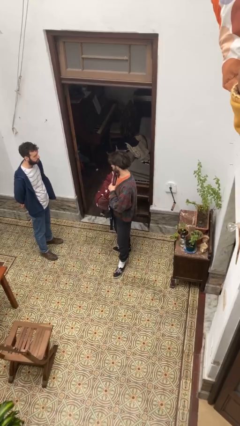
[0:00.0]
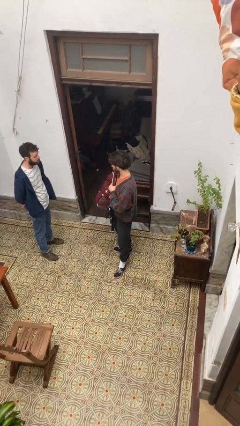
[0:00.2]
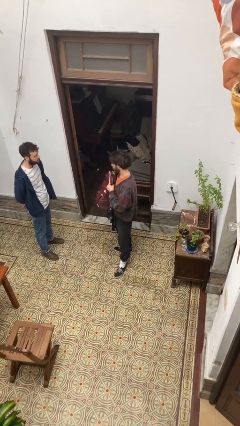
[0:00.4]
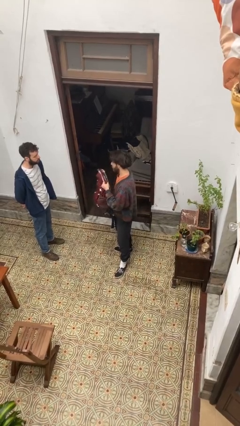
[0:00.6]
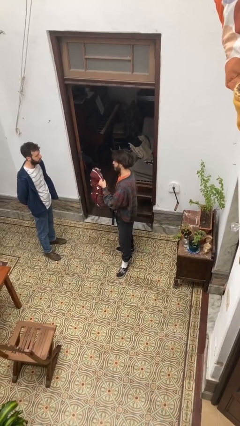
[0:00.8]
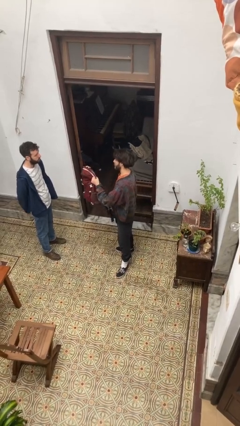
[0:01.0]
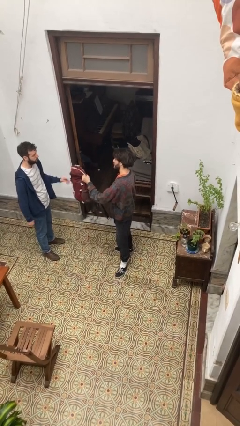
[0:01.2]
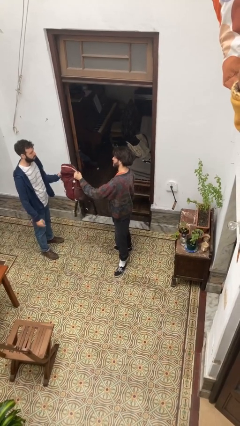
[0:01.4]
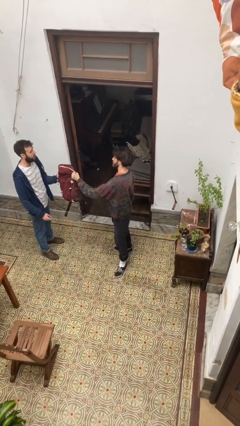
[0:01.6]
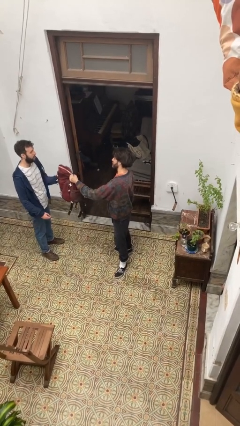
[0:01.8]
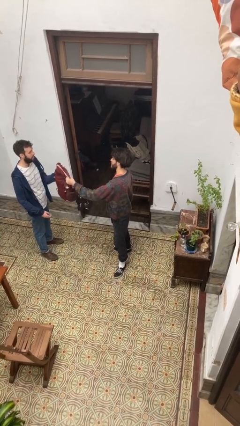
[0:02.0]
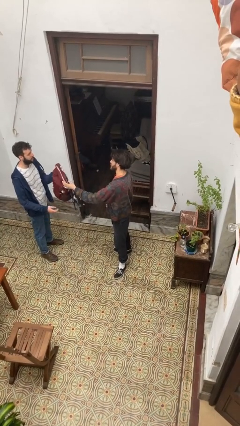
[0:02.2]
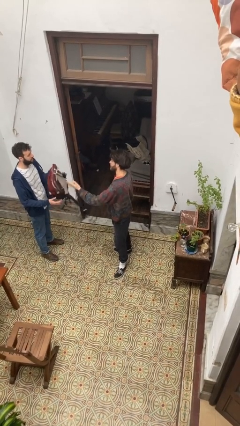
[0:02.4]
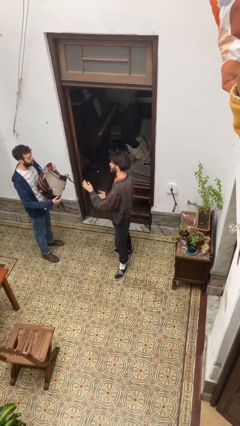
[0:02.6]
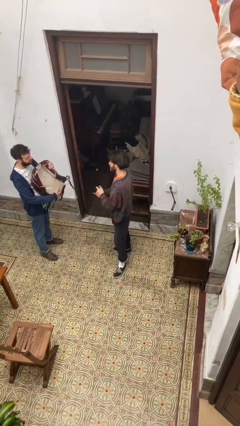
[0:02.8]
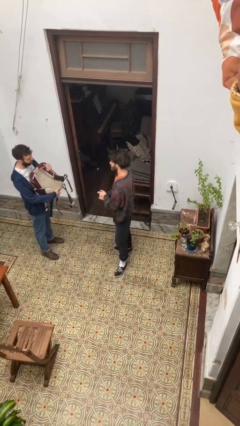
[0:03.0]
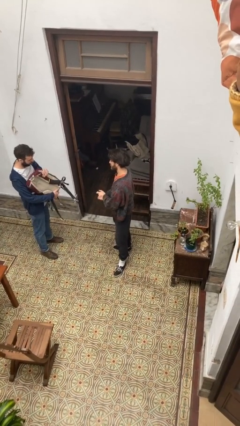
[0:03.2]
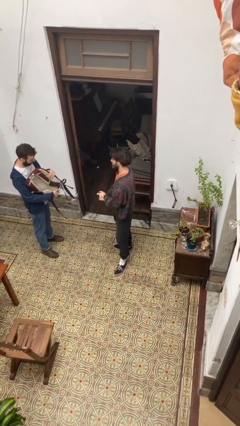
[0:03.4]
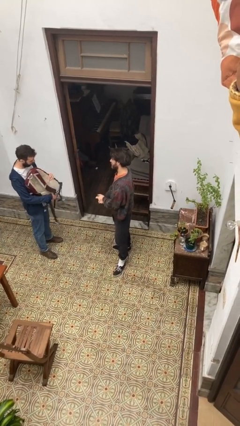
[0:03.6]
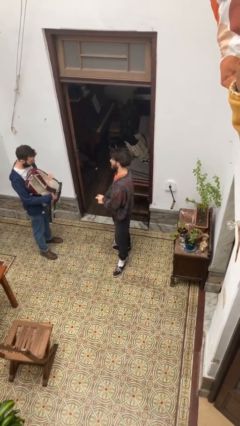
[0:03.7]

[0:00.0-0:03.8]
person transfers object to person

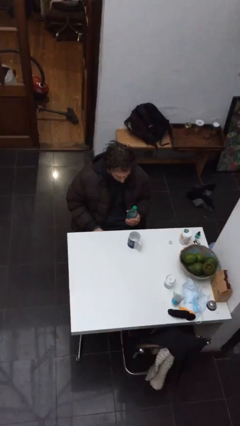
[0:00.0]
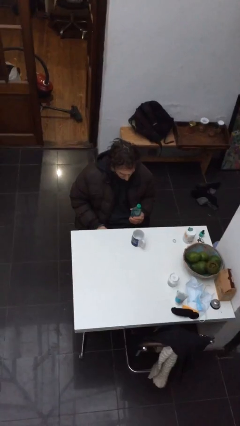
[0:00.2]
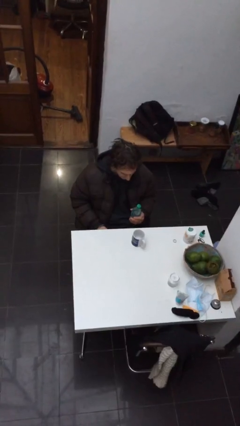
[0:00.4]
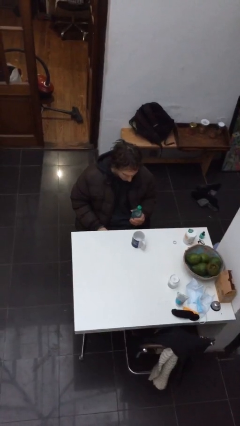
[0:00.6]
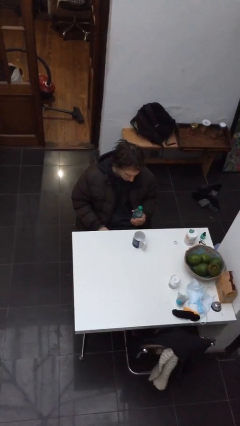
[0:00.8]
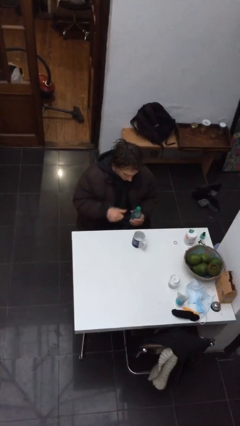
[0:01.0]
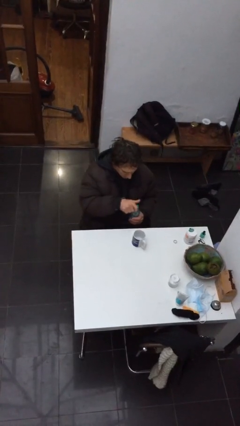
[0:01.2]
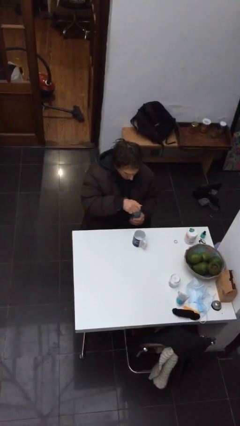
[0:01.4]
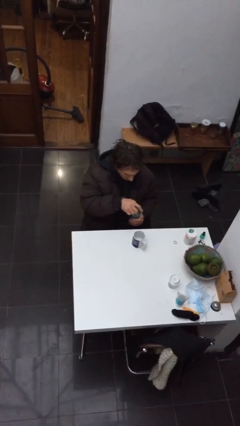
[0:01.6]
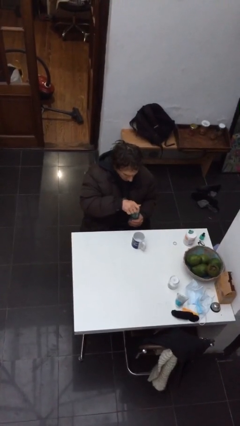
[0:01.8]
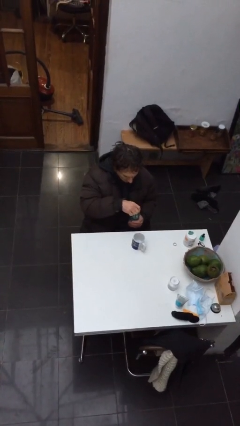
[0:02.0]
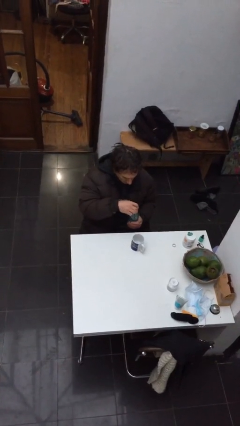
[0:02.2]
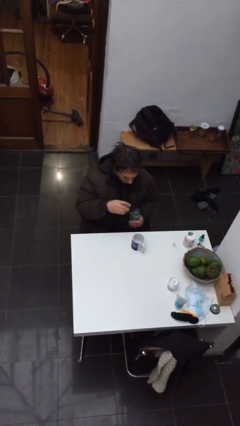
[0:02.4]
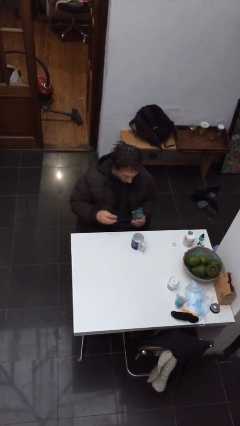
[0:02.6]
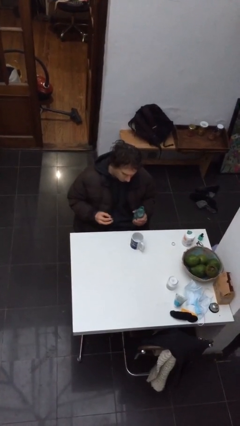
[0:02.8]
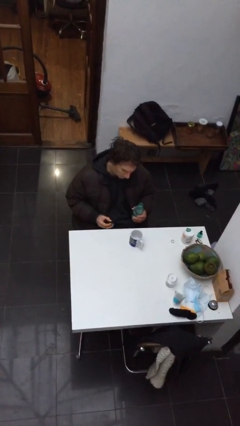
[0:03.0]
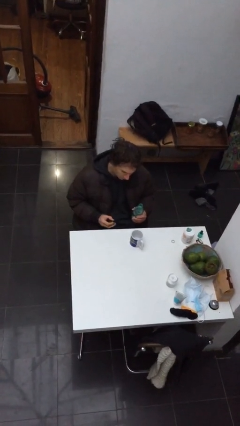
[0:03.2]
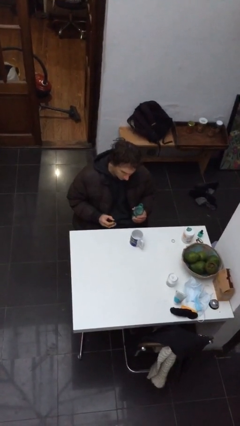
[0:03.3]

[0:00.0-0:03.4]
person unscrews lid from bottle

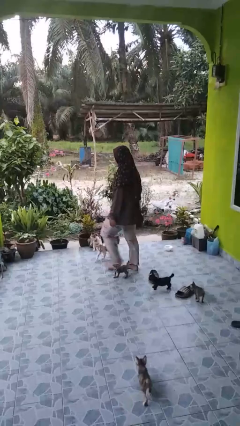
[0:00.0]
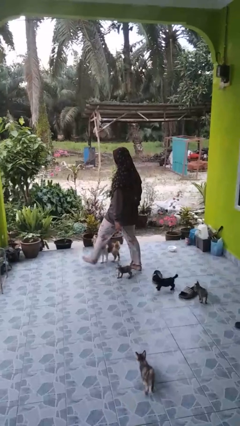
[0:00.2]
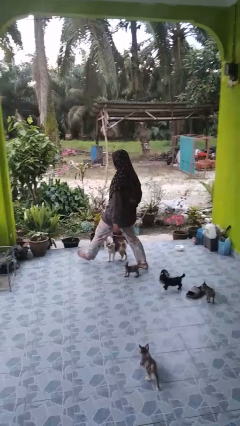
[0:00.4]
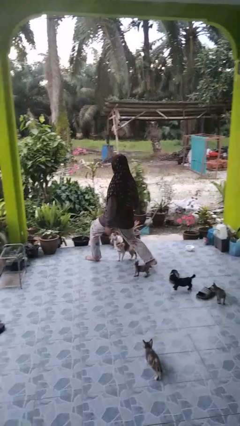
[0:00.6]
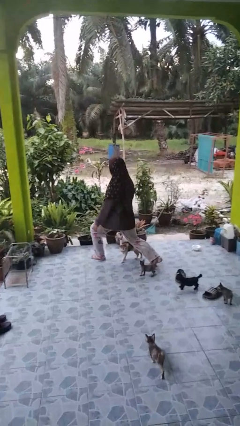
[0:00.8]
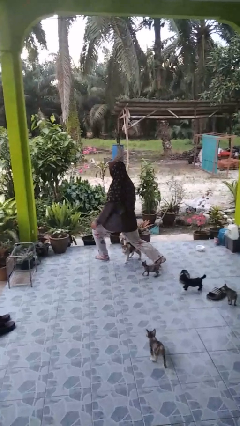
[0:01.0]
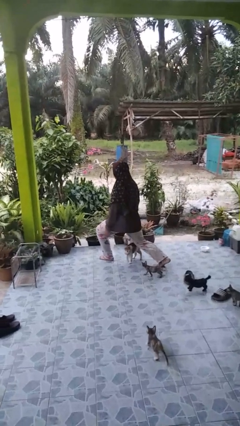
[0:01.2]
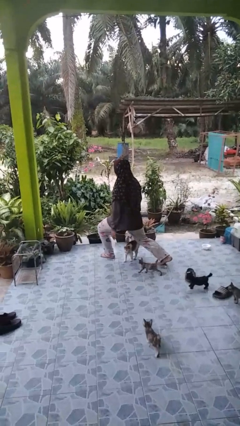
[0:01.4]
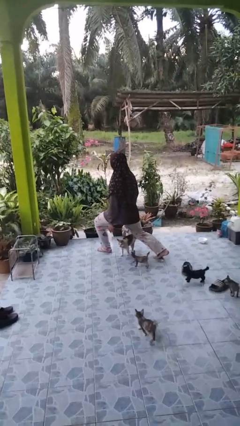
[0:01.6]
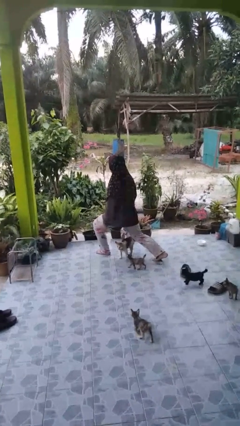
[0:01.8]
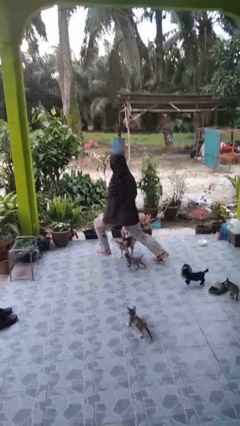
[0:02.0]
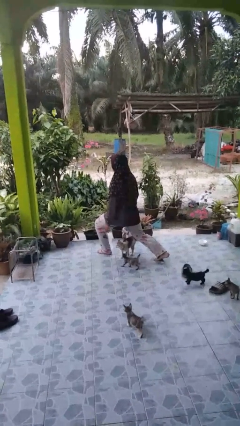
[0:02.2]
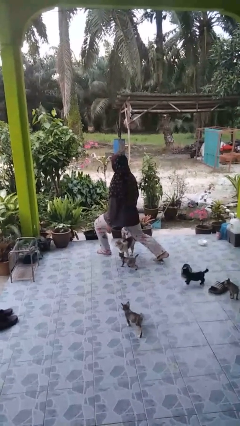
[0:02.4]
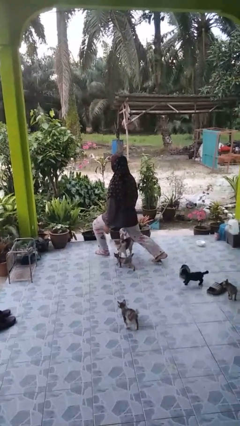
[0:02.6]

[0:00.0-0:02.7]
person exercises with lunges

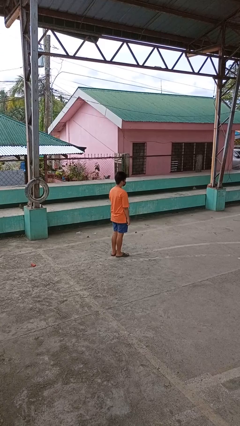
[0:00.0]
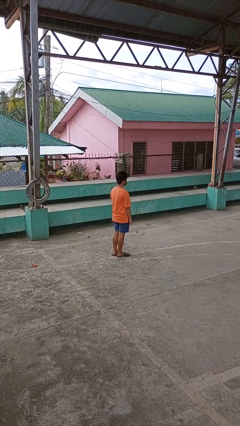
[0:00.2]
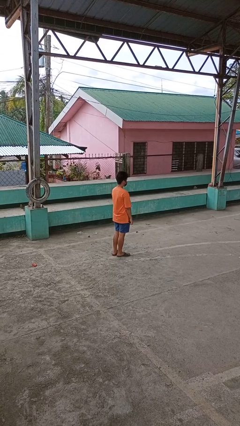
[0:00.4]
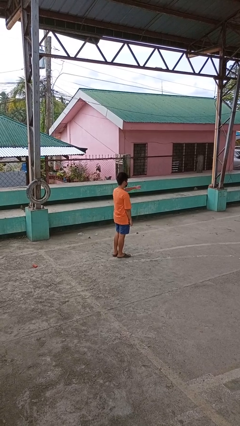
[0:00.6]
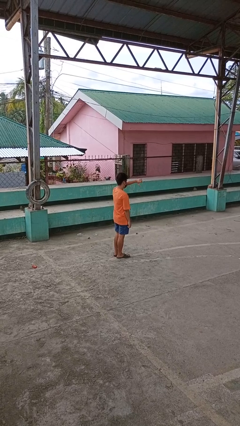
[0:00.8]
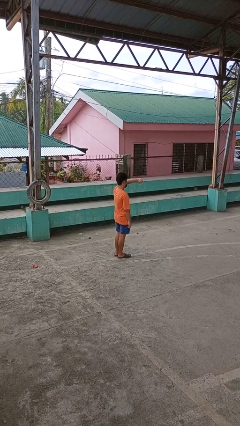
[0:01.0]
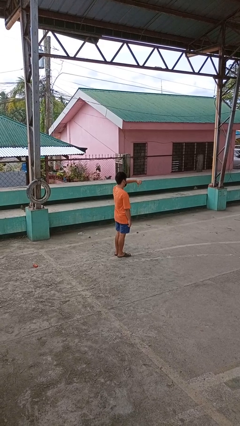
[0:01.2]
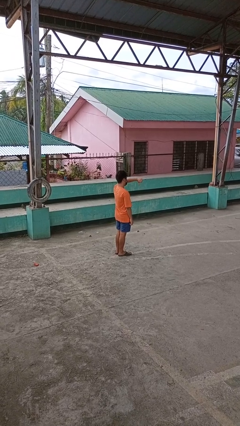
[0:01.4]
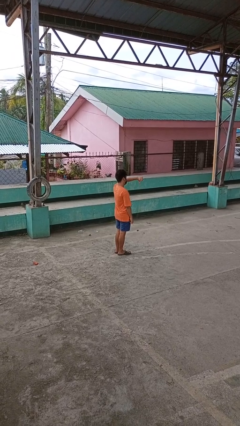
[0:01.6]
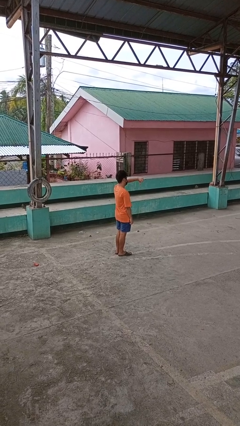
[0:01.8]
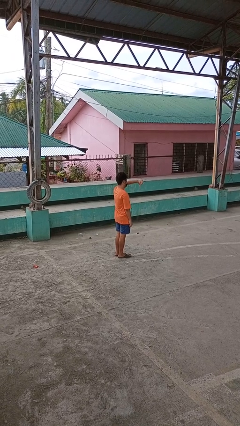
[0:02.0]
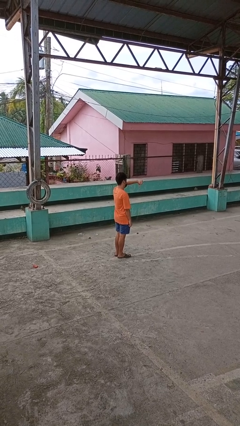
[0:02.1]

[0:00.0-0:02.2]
person gestures thumbs down

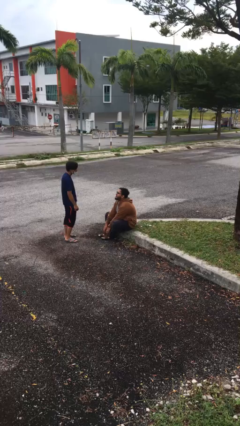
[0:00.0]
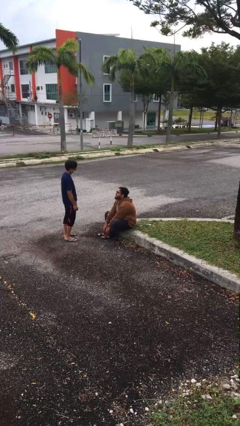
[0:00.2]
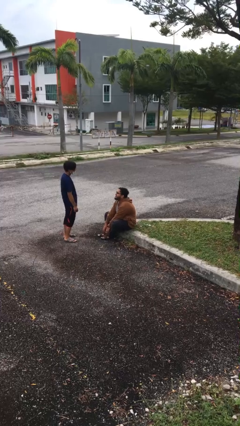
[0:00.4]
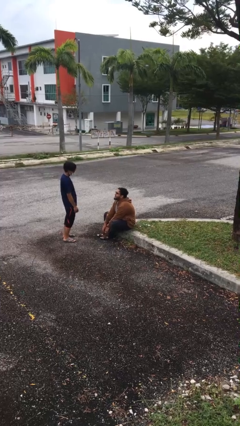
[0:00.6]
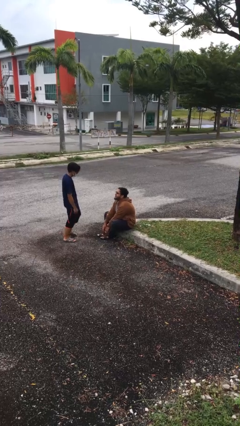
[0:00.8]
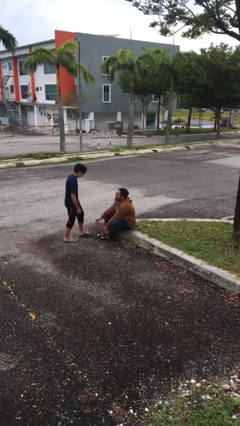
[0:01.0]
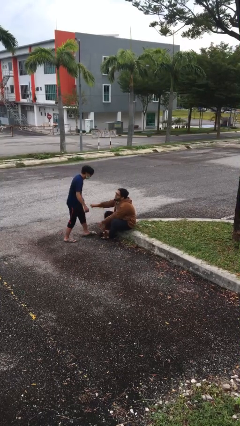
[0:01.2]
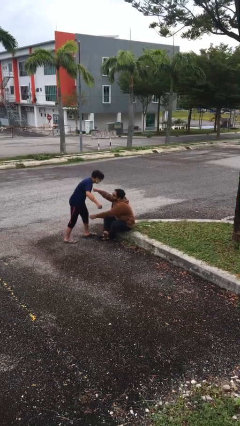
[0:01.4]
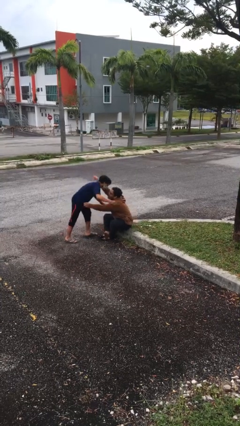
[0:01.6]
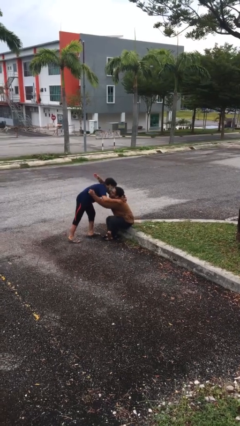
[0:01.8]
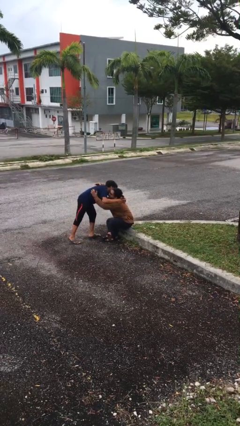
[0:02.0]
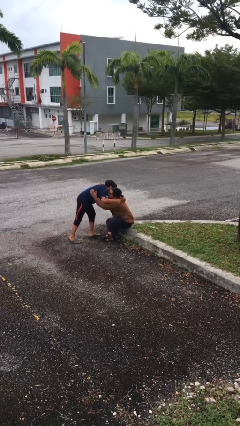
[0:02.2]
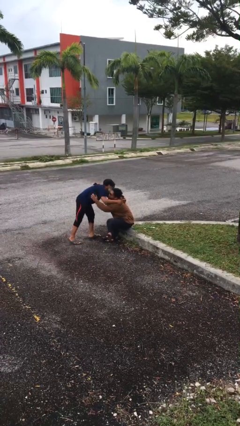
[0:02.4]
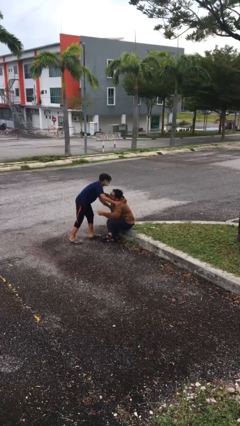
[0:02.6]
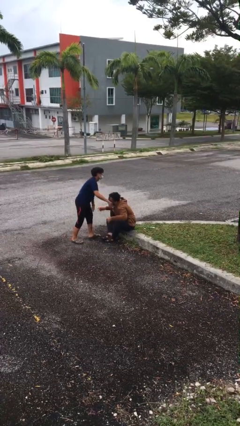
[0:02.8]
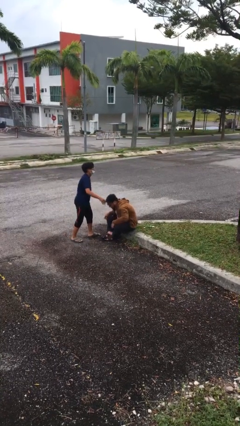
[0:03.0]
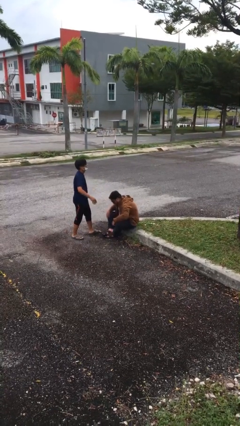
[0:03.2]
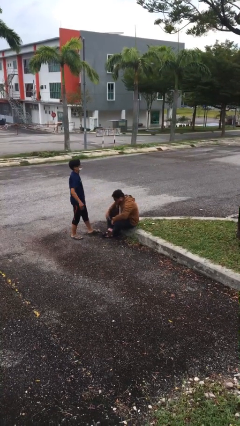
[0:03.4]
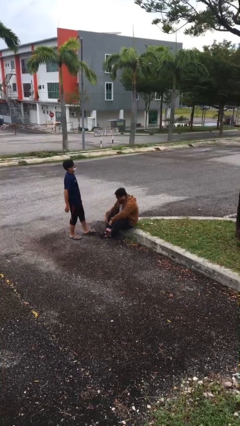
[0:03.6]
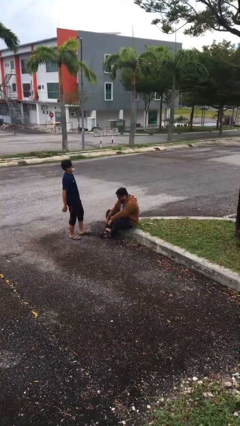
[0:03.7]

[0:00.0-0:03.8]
person embraces person

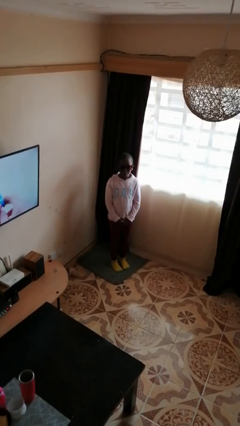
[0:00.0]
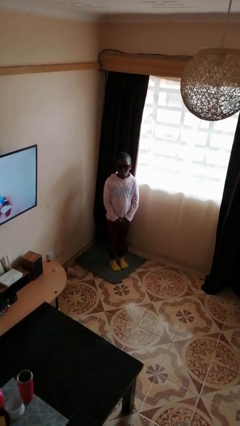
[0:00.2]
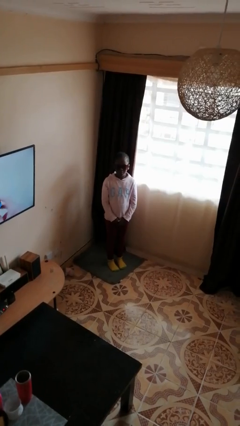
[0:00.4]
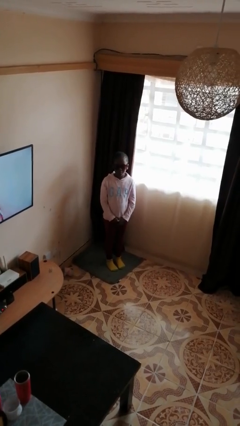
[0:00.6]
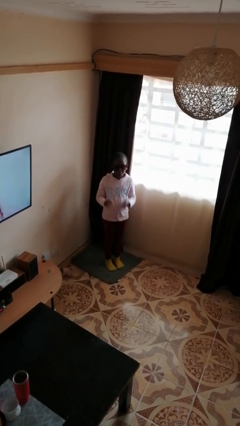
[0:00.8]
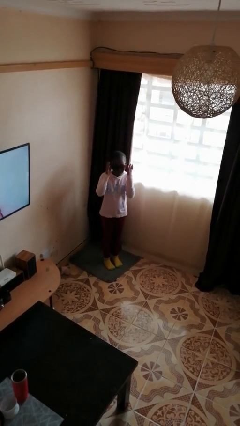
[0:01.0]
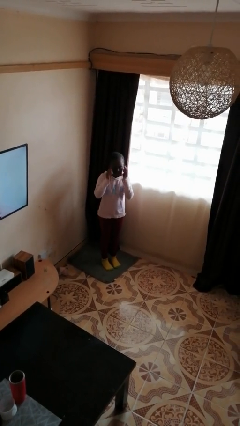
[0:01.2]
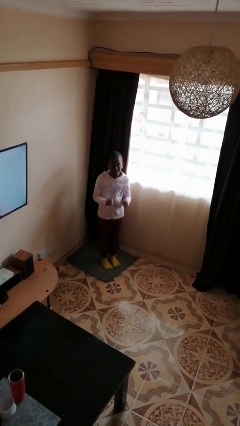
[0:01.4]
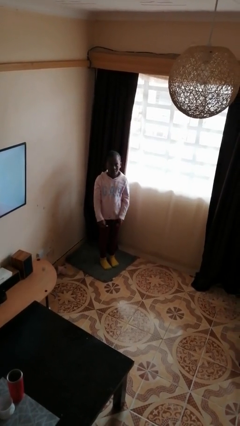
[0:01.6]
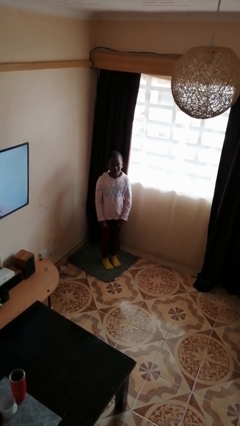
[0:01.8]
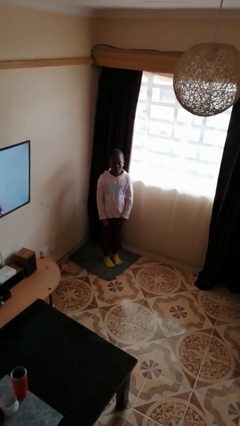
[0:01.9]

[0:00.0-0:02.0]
person takes off sunglasses
